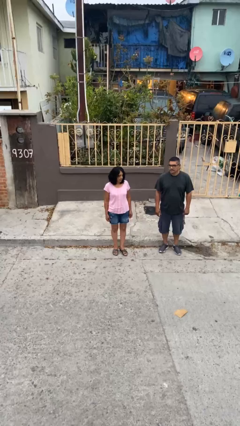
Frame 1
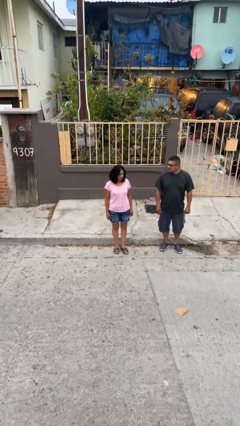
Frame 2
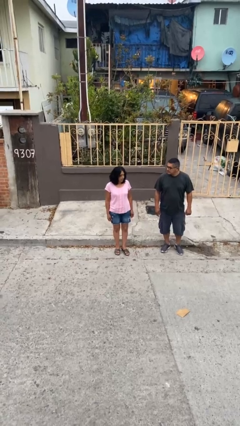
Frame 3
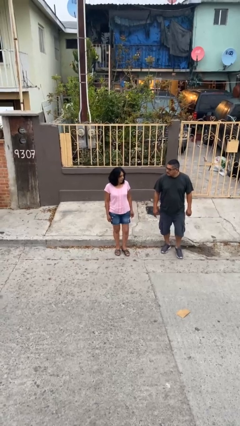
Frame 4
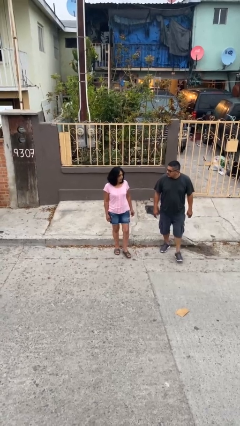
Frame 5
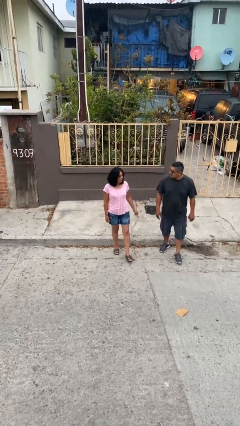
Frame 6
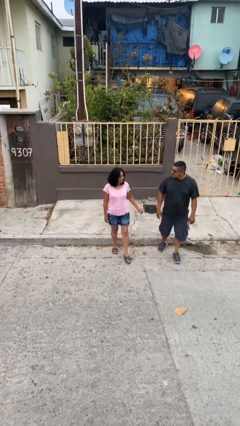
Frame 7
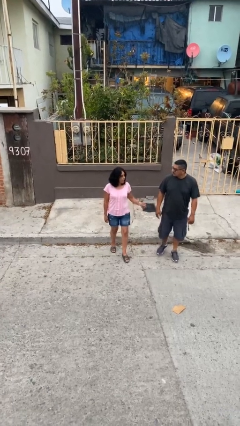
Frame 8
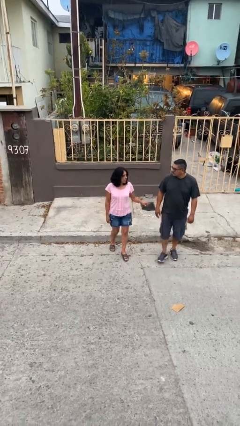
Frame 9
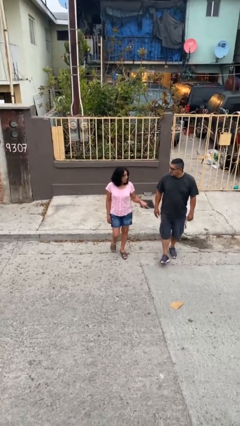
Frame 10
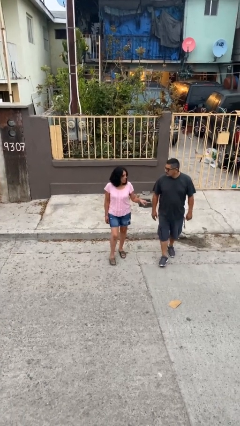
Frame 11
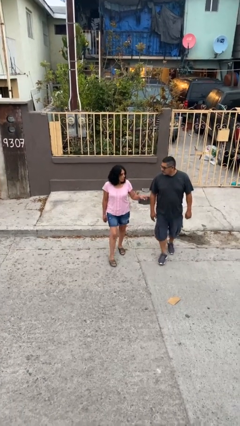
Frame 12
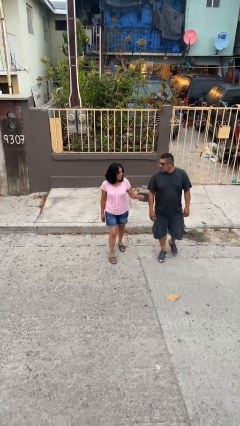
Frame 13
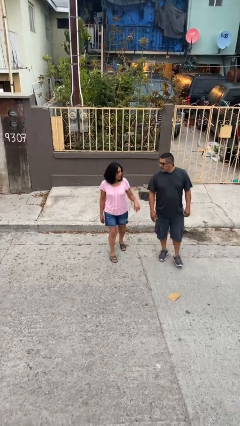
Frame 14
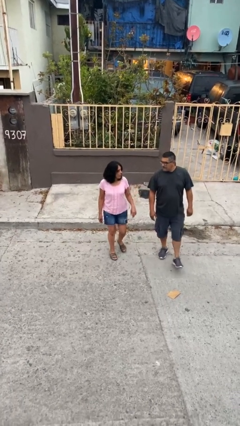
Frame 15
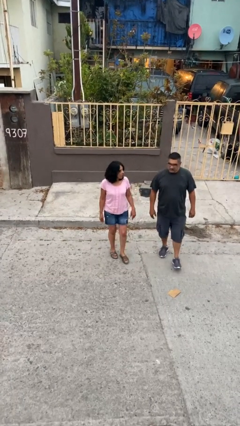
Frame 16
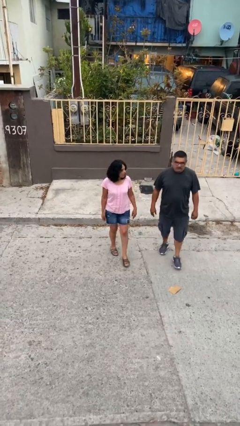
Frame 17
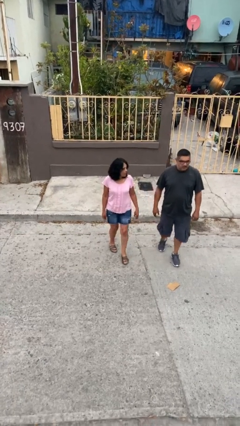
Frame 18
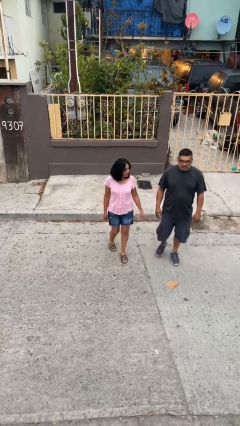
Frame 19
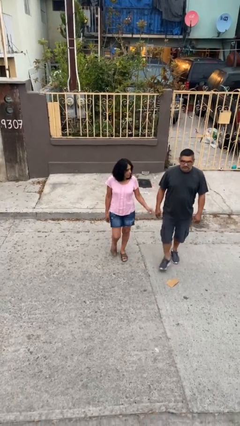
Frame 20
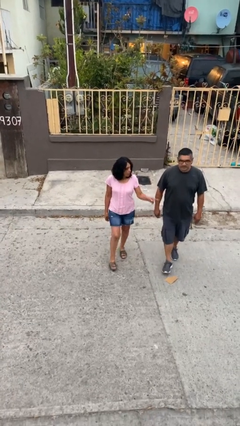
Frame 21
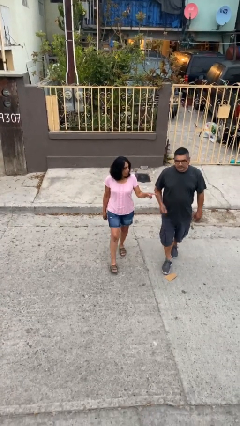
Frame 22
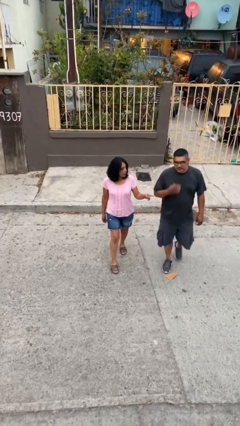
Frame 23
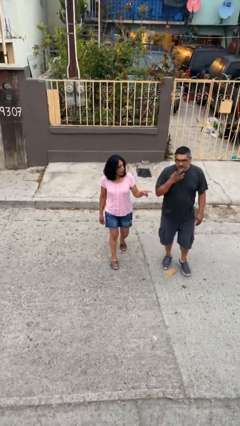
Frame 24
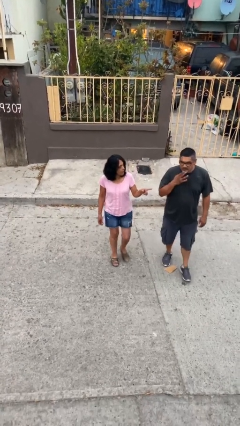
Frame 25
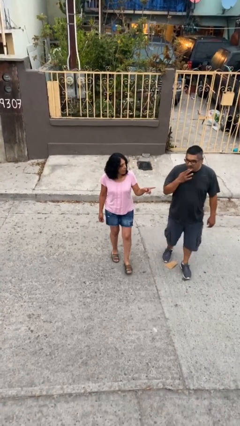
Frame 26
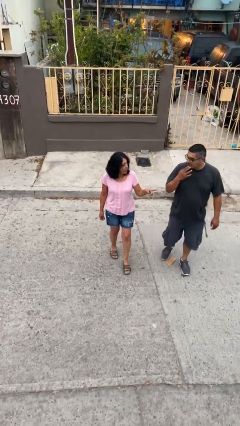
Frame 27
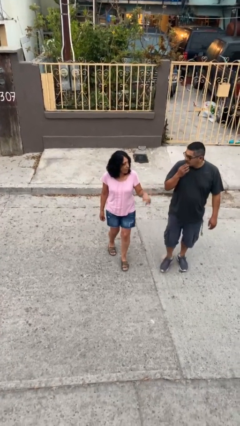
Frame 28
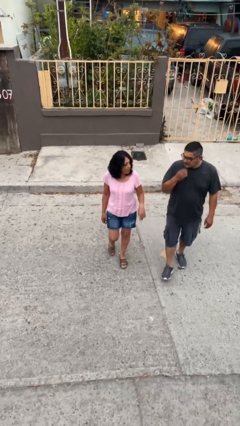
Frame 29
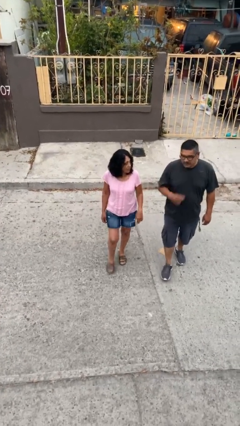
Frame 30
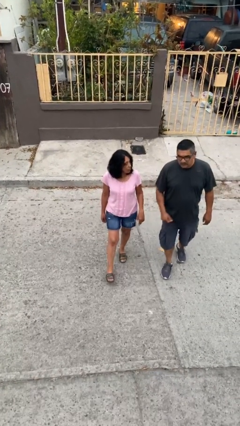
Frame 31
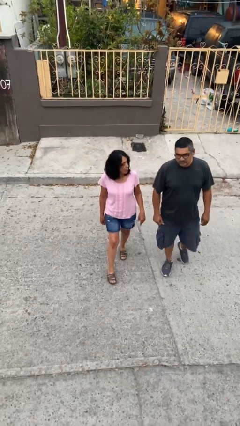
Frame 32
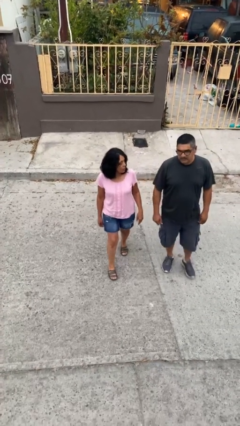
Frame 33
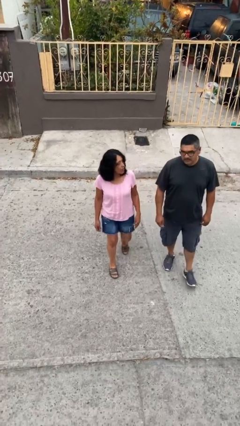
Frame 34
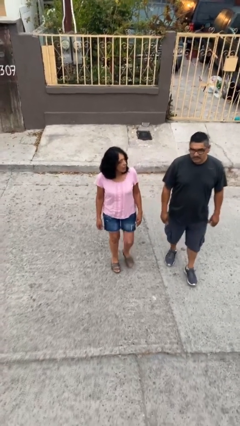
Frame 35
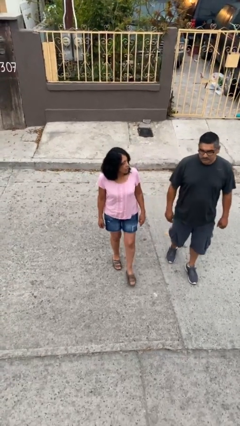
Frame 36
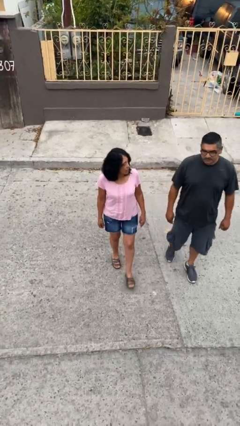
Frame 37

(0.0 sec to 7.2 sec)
person talks to person

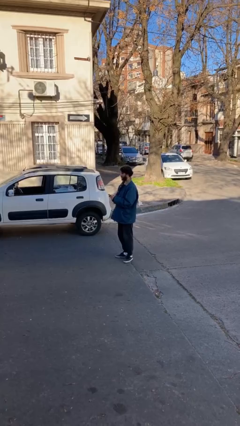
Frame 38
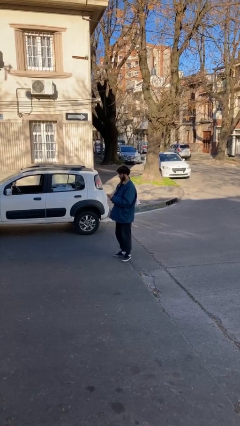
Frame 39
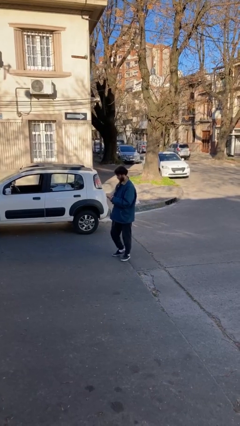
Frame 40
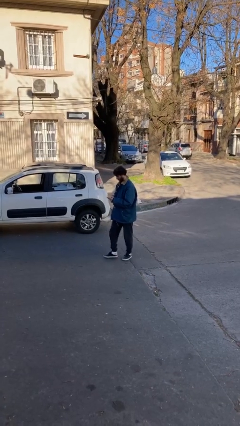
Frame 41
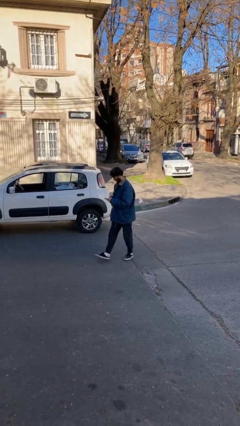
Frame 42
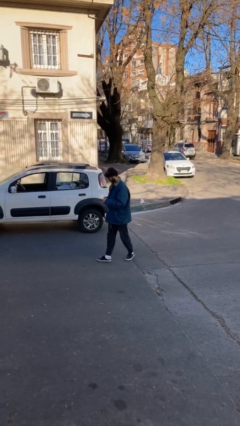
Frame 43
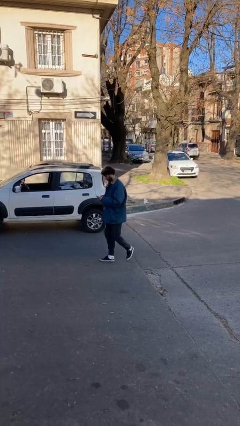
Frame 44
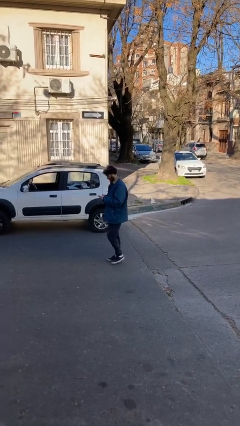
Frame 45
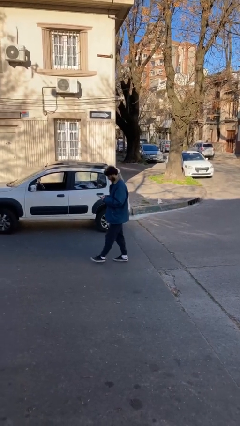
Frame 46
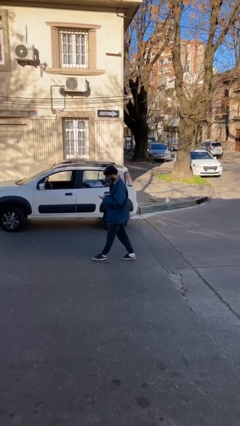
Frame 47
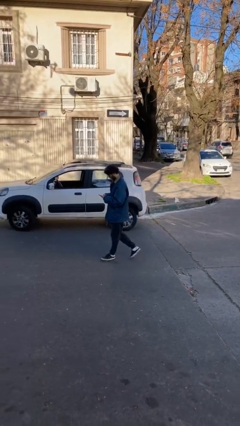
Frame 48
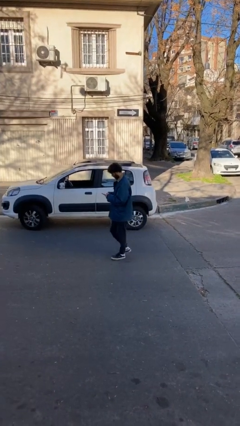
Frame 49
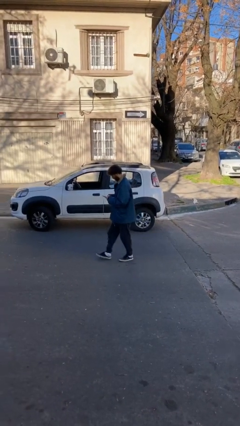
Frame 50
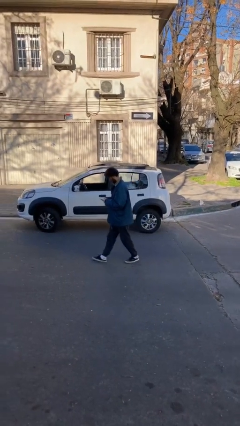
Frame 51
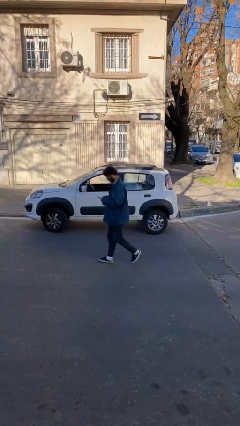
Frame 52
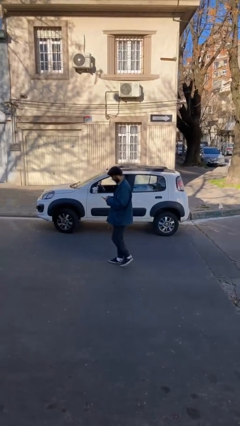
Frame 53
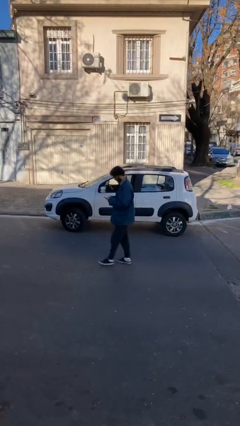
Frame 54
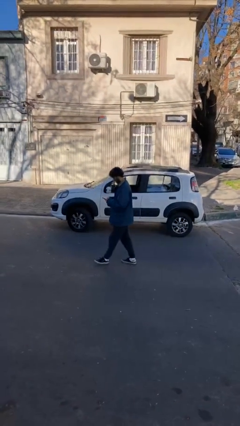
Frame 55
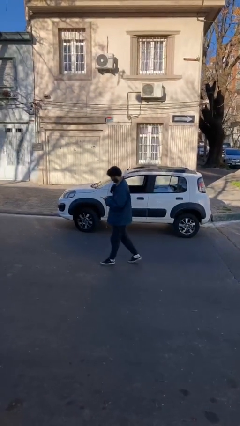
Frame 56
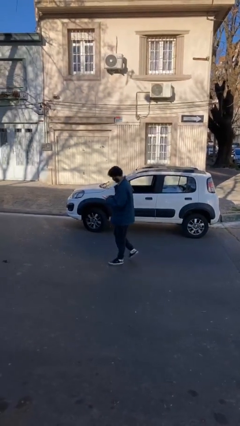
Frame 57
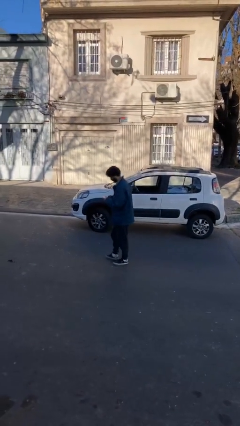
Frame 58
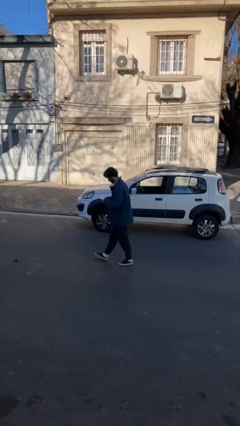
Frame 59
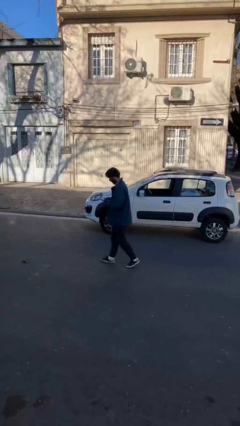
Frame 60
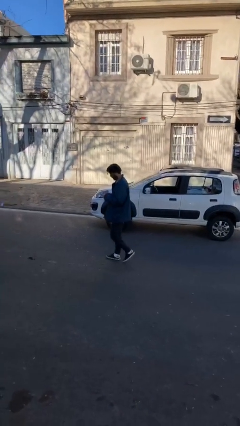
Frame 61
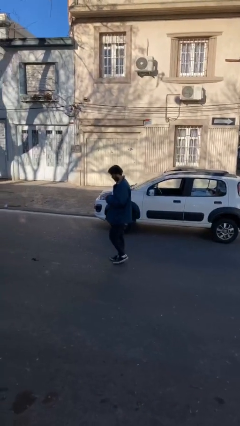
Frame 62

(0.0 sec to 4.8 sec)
person texts on phone

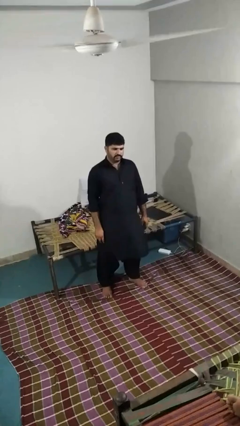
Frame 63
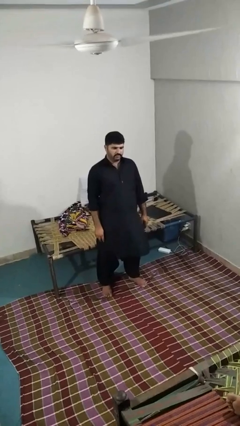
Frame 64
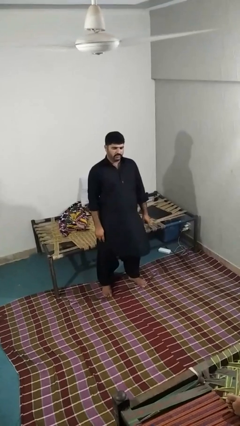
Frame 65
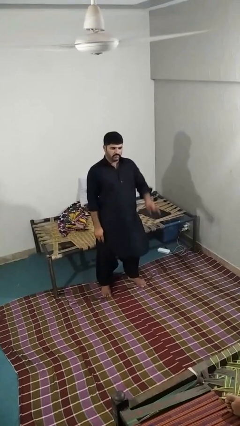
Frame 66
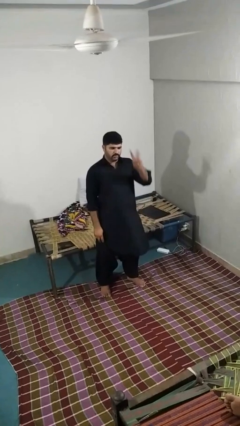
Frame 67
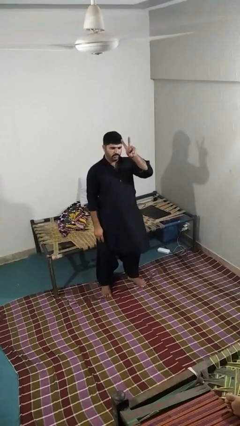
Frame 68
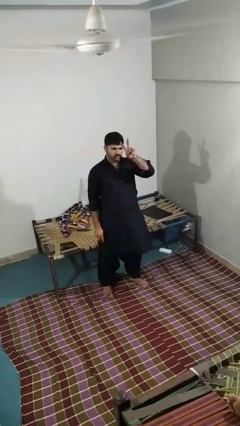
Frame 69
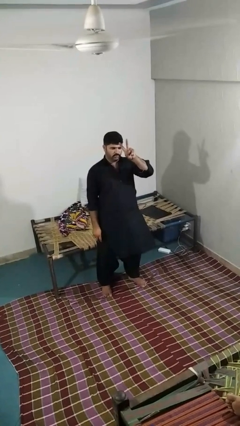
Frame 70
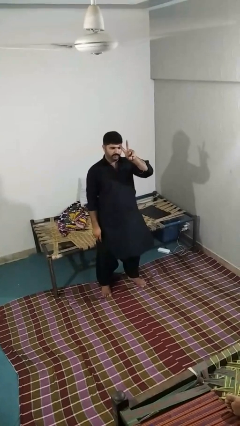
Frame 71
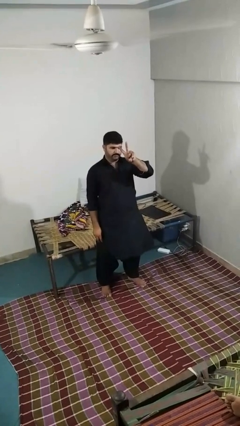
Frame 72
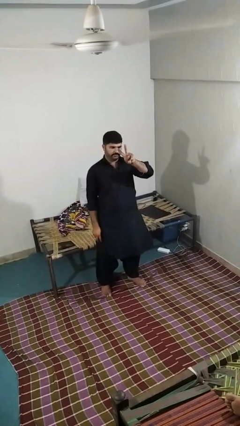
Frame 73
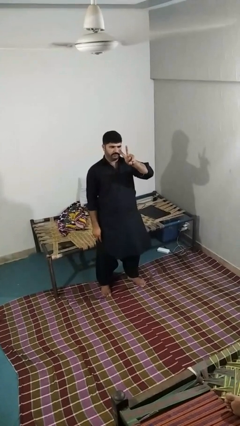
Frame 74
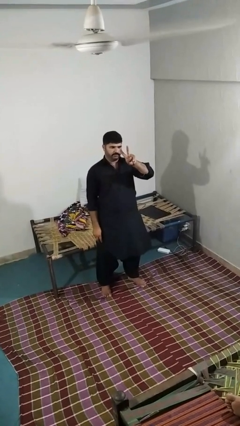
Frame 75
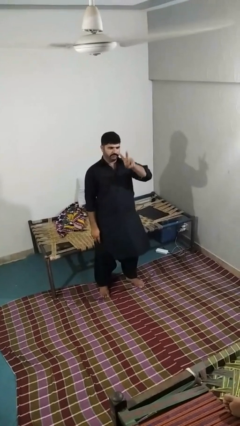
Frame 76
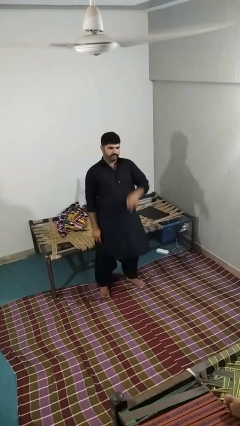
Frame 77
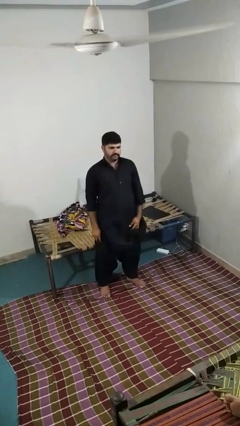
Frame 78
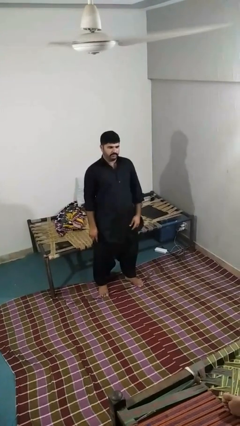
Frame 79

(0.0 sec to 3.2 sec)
person gestures peace

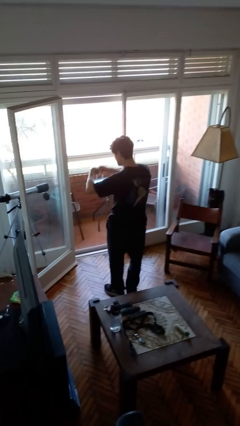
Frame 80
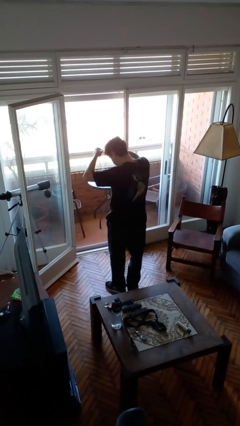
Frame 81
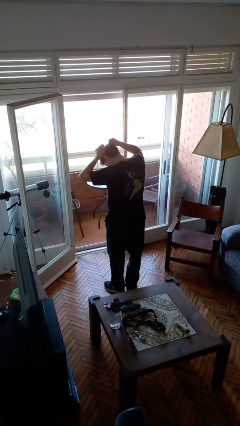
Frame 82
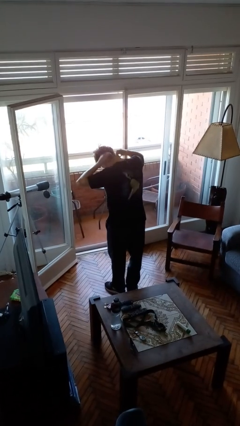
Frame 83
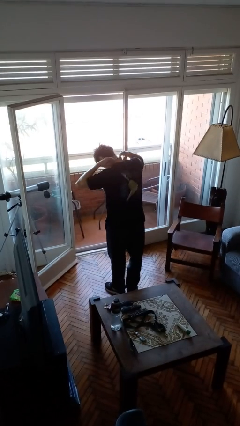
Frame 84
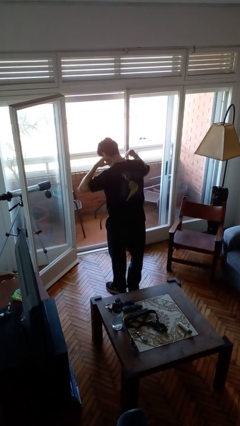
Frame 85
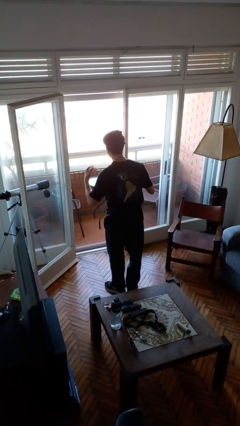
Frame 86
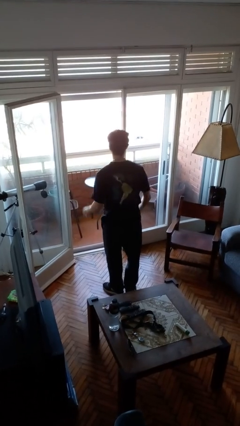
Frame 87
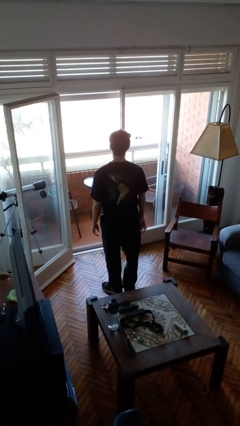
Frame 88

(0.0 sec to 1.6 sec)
person puts on necklace

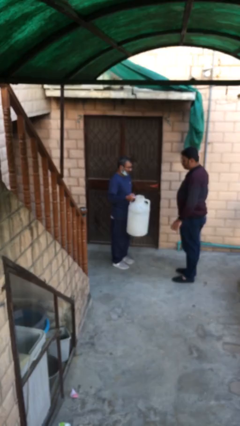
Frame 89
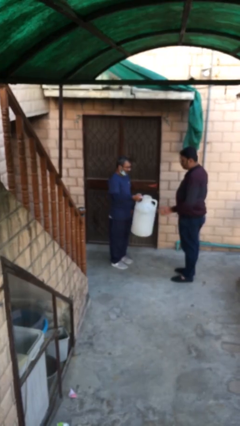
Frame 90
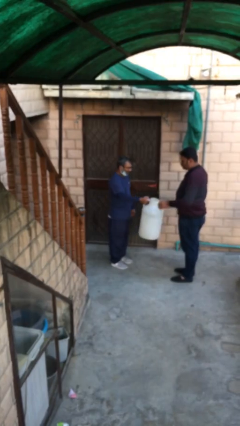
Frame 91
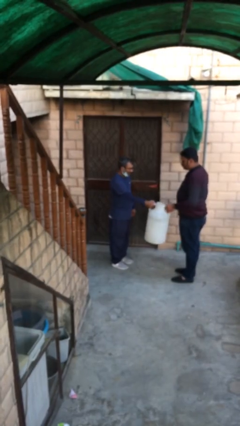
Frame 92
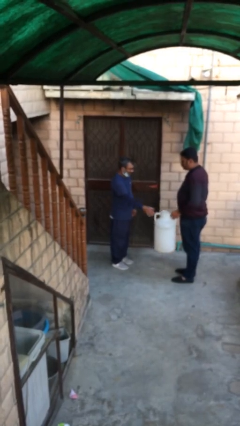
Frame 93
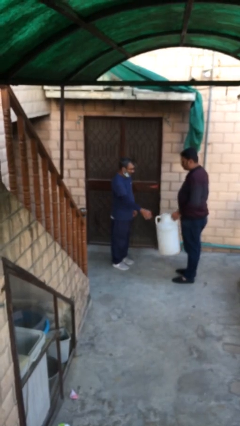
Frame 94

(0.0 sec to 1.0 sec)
person transfers object to person
